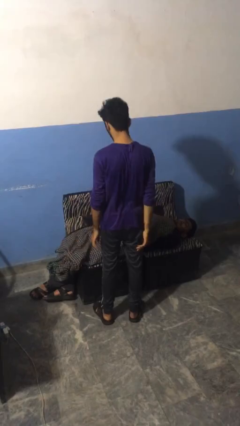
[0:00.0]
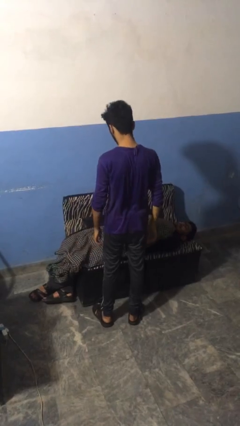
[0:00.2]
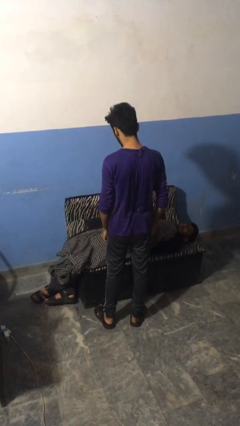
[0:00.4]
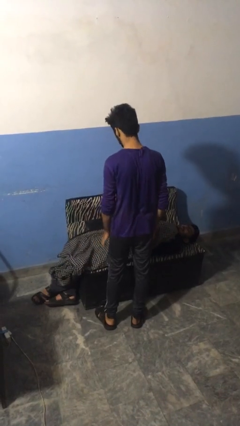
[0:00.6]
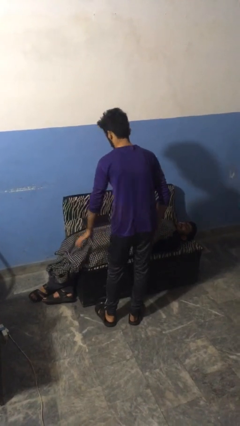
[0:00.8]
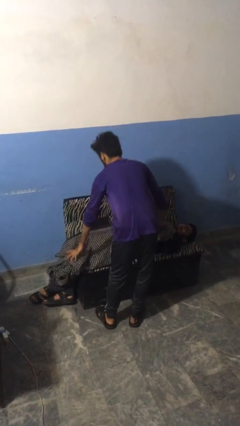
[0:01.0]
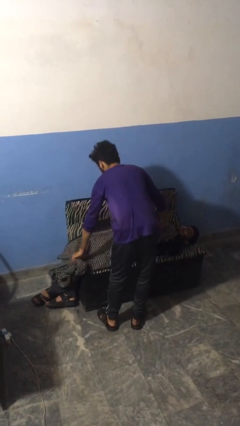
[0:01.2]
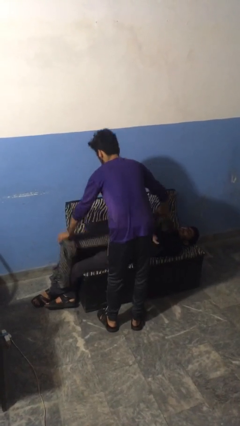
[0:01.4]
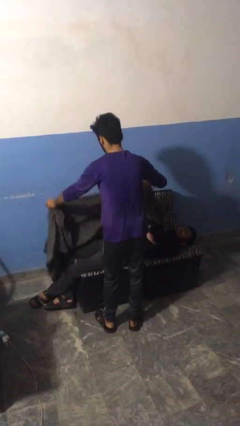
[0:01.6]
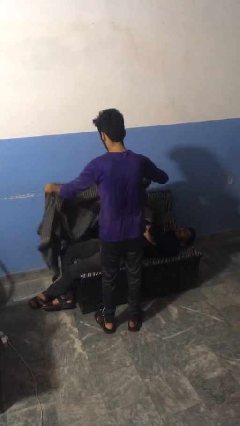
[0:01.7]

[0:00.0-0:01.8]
person uncovers friend with blanket

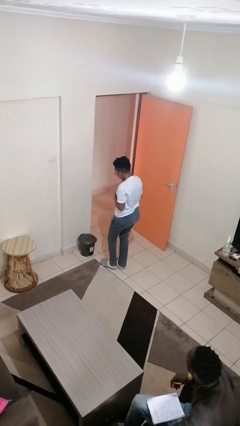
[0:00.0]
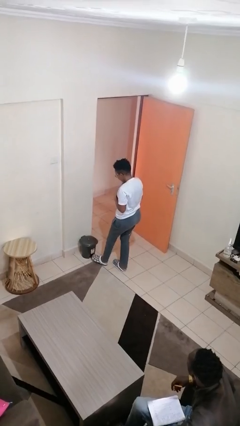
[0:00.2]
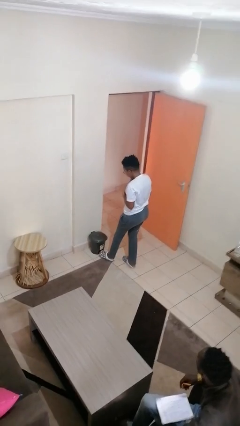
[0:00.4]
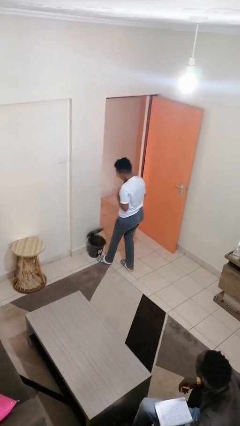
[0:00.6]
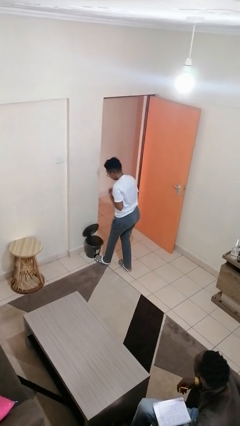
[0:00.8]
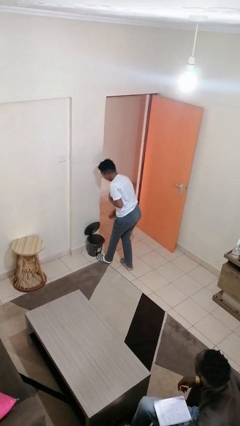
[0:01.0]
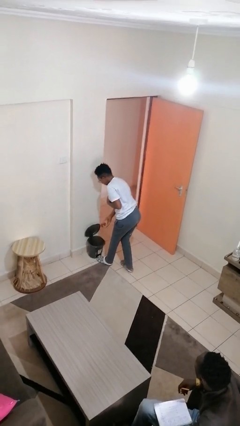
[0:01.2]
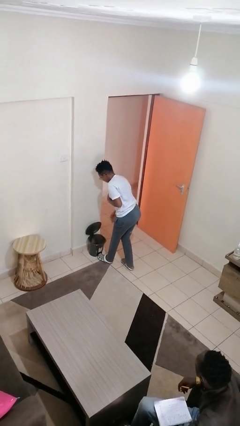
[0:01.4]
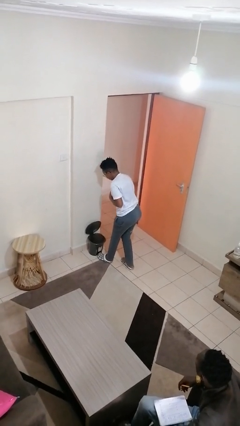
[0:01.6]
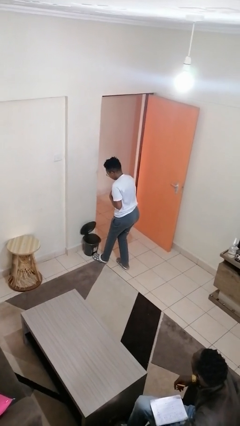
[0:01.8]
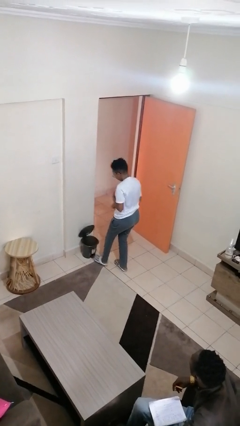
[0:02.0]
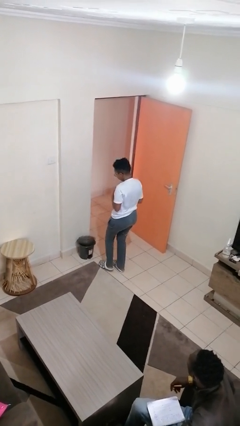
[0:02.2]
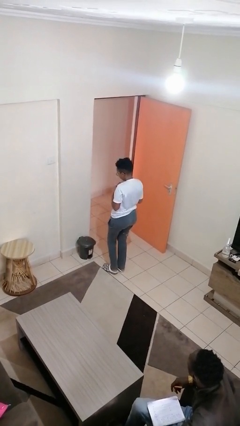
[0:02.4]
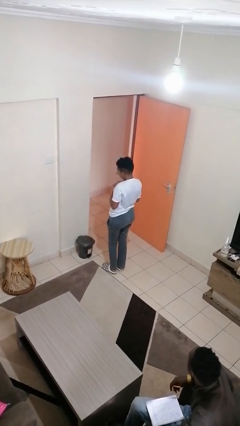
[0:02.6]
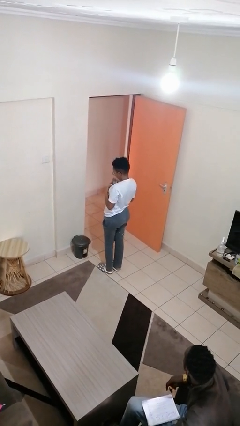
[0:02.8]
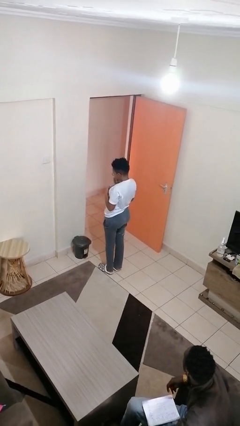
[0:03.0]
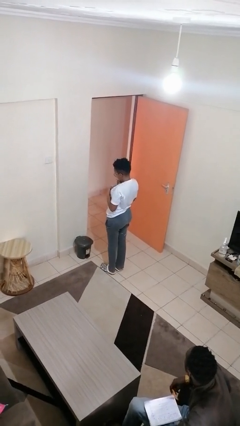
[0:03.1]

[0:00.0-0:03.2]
person discards trash

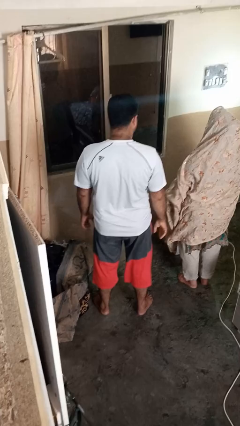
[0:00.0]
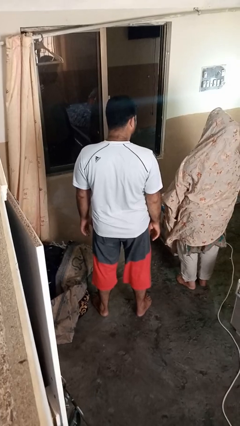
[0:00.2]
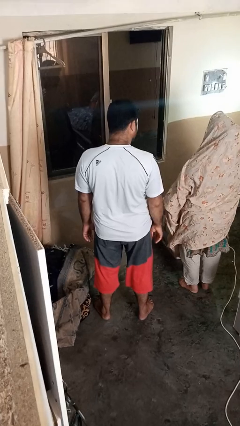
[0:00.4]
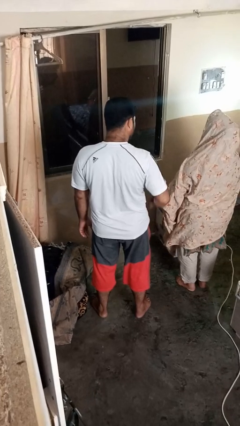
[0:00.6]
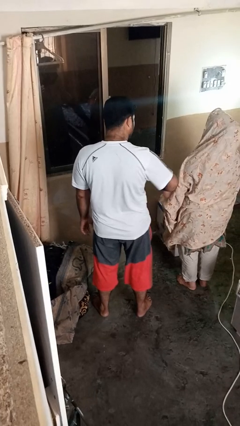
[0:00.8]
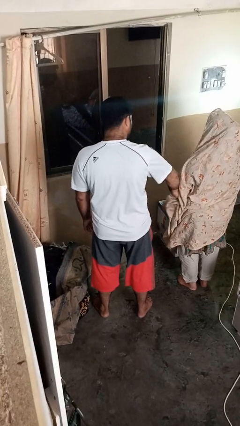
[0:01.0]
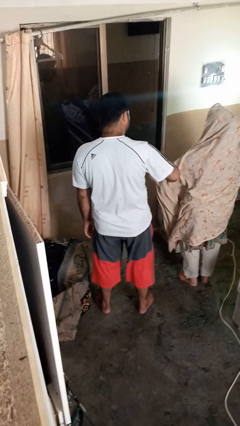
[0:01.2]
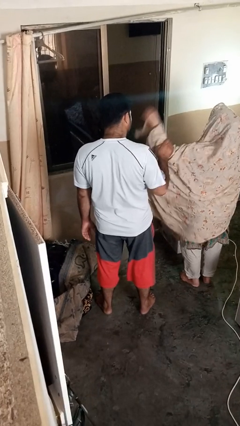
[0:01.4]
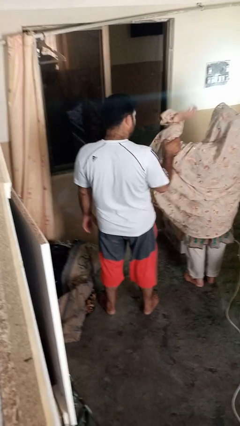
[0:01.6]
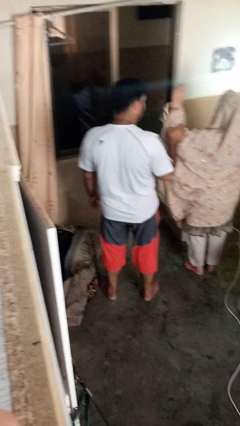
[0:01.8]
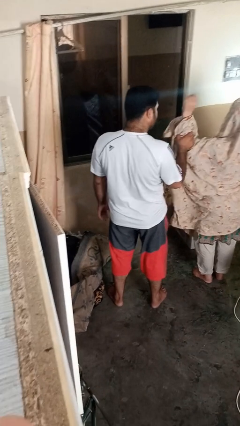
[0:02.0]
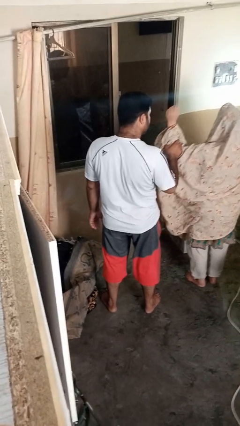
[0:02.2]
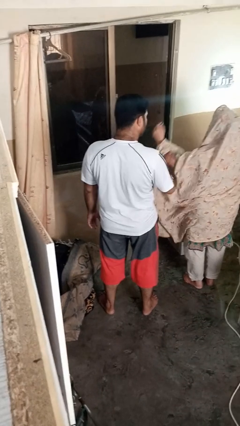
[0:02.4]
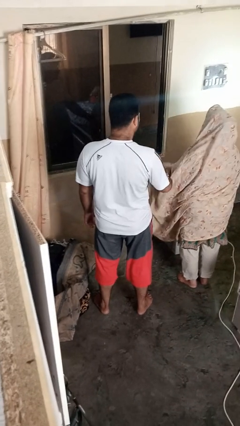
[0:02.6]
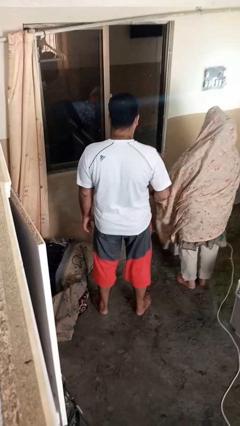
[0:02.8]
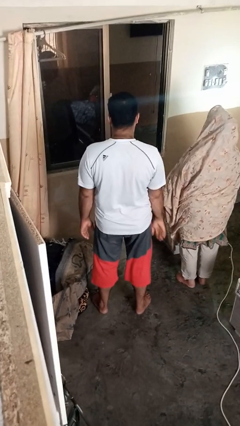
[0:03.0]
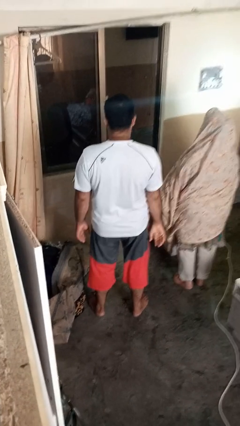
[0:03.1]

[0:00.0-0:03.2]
person grabs person by forearm

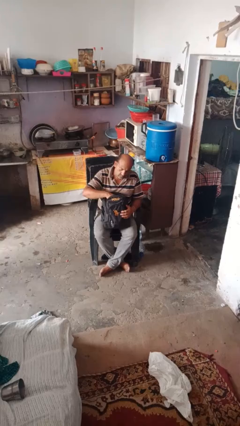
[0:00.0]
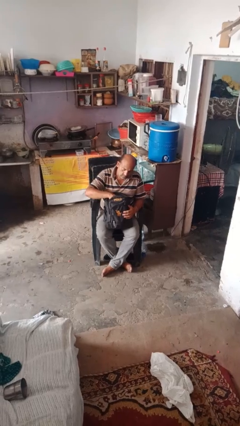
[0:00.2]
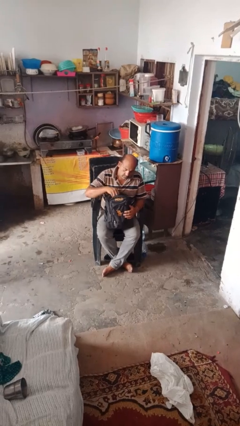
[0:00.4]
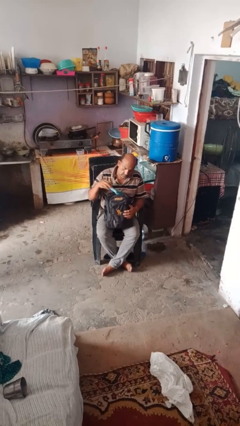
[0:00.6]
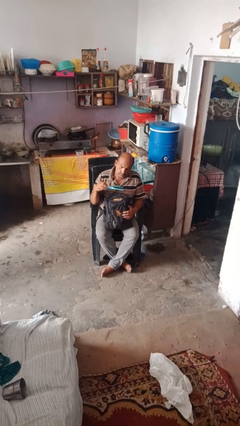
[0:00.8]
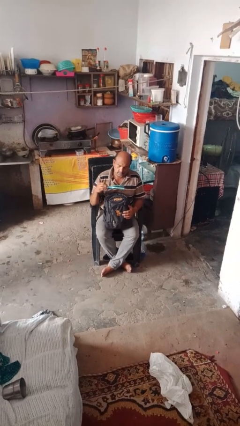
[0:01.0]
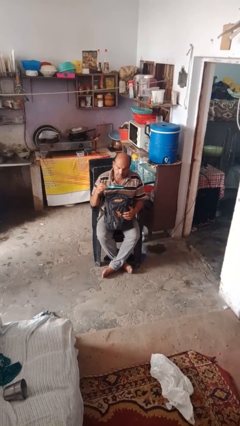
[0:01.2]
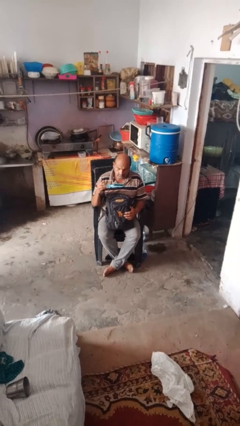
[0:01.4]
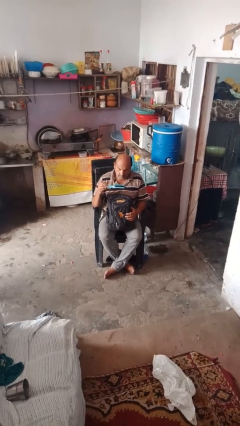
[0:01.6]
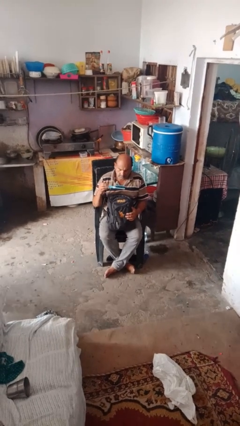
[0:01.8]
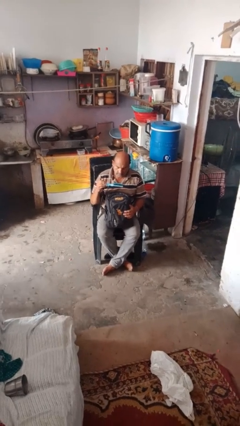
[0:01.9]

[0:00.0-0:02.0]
person takes object from backpack

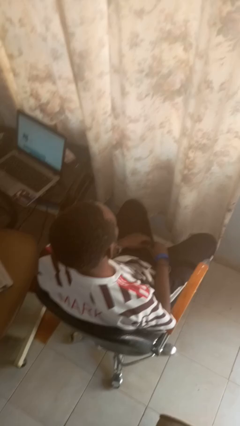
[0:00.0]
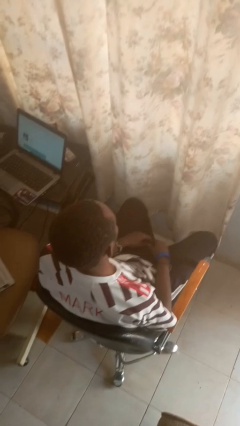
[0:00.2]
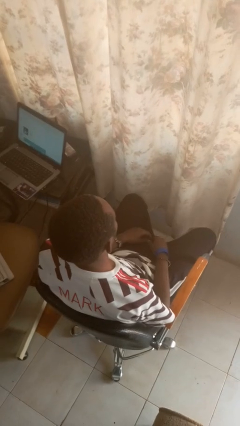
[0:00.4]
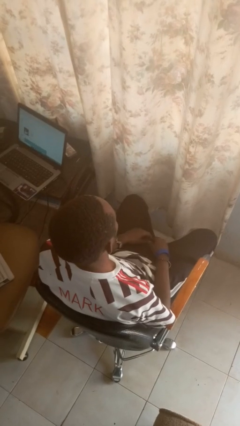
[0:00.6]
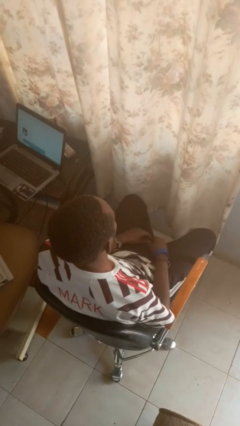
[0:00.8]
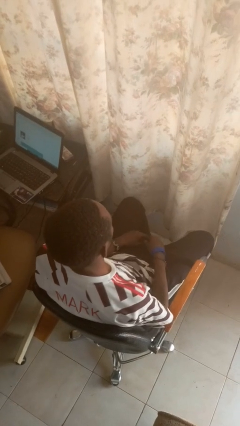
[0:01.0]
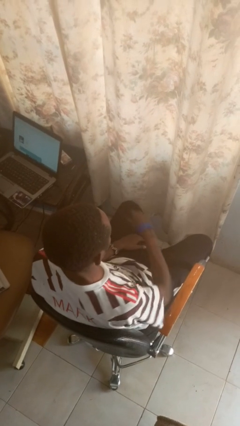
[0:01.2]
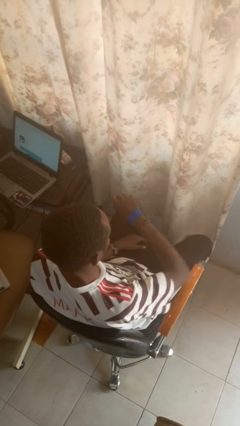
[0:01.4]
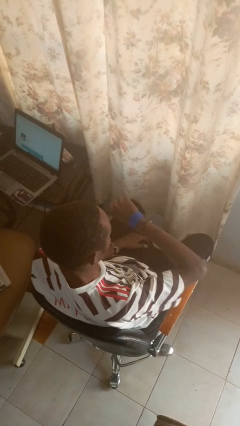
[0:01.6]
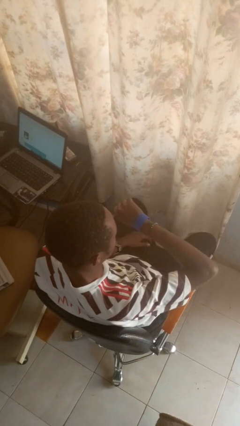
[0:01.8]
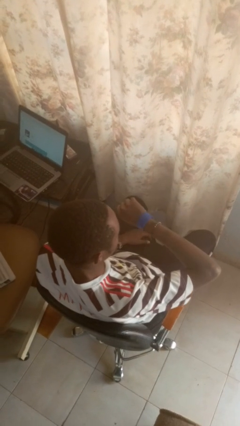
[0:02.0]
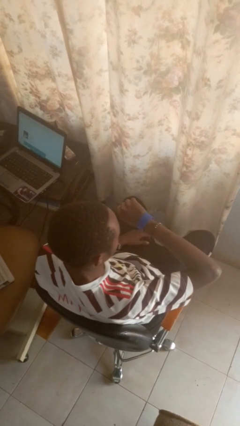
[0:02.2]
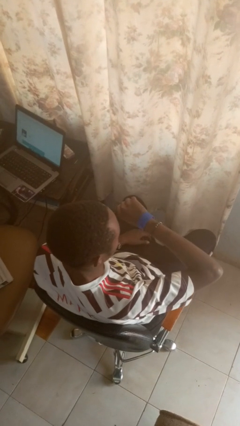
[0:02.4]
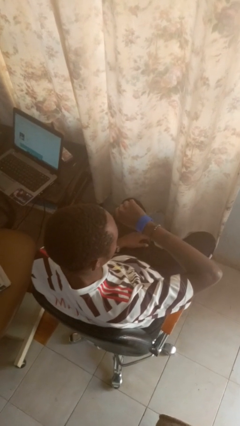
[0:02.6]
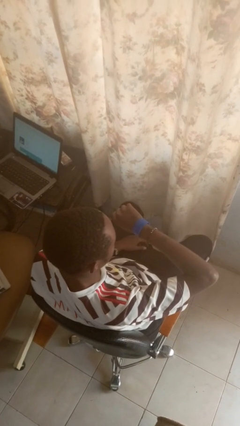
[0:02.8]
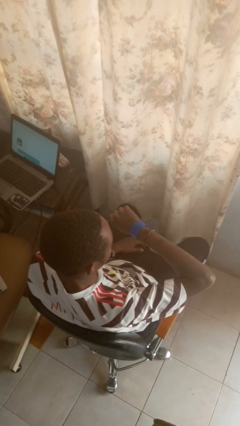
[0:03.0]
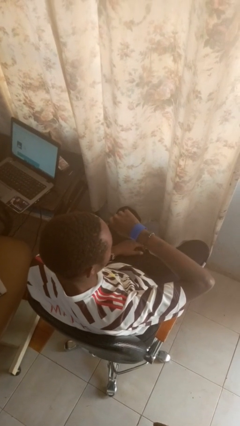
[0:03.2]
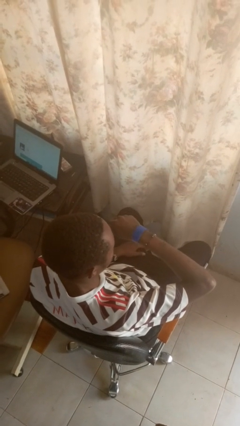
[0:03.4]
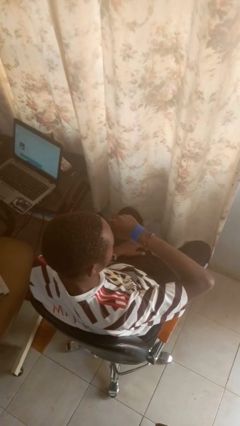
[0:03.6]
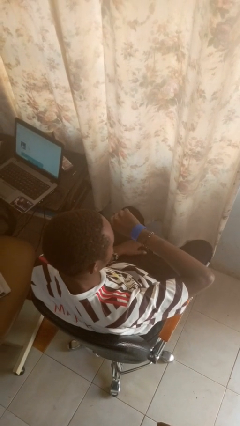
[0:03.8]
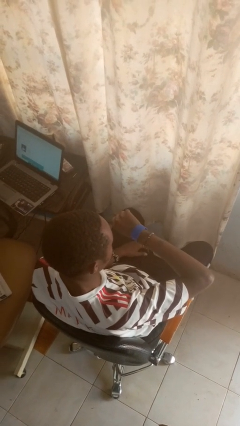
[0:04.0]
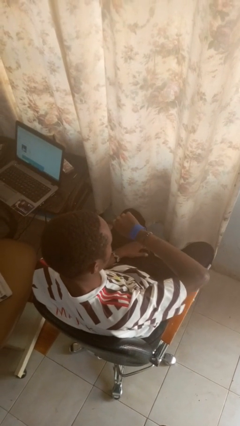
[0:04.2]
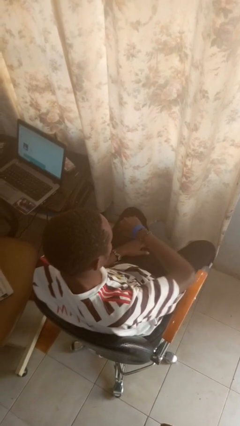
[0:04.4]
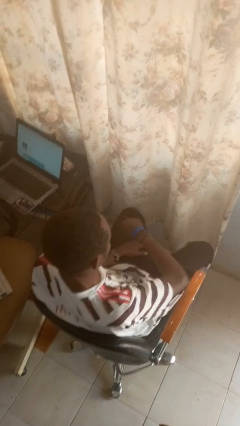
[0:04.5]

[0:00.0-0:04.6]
person looks at wristwatch

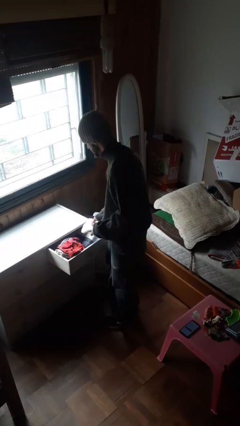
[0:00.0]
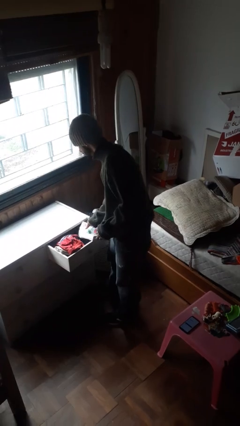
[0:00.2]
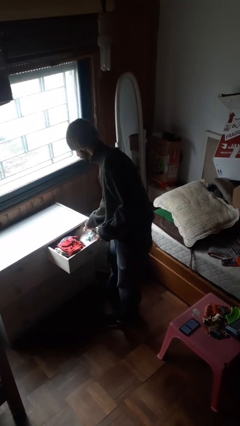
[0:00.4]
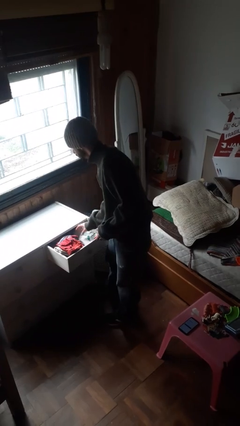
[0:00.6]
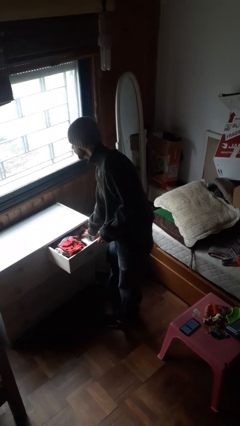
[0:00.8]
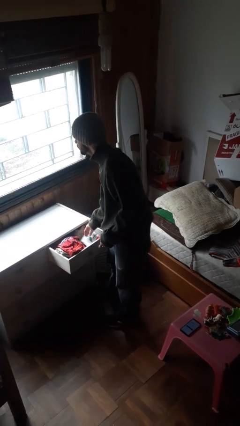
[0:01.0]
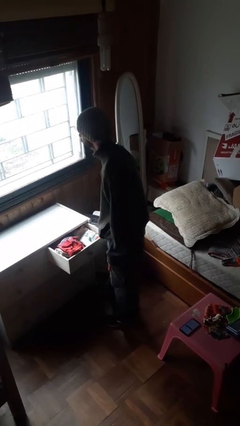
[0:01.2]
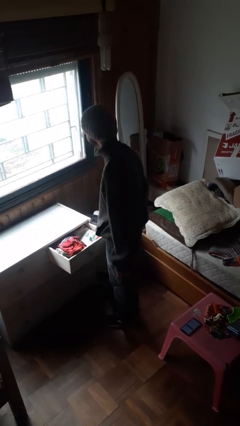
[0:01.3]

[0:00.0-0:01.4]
person puts clothes into dresser

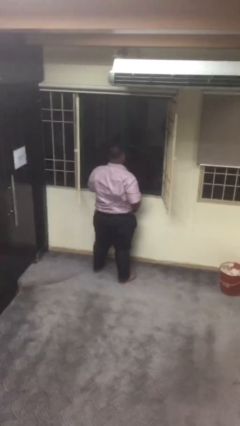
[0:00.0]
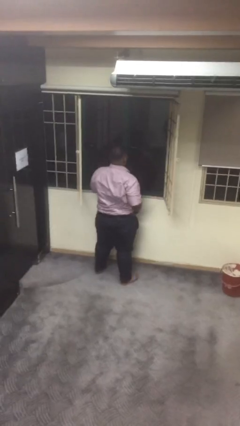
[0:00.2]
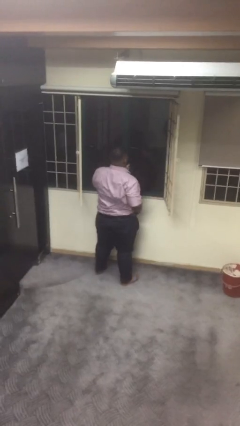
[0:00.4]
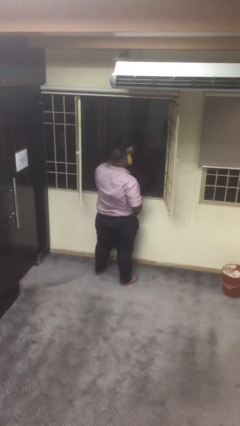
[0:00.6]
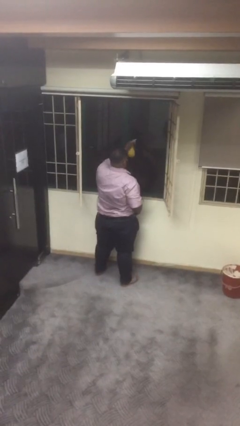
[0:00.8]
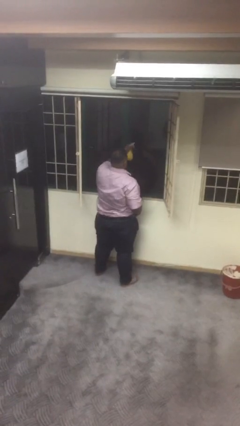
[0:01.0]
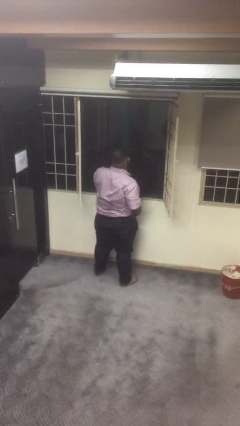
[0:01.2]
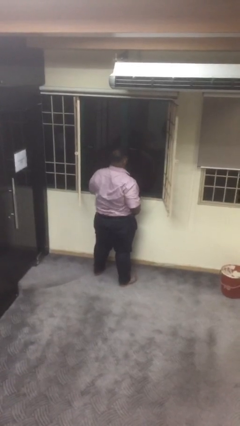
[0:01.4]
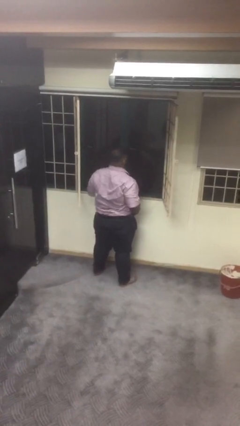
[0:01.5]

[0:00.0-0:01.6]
person sprays from bottle
